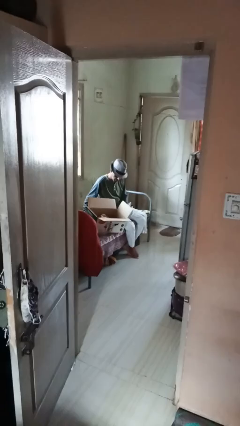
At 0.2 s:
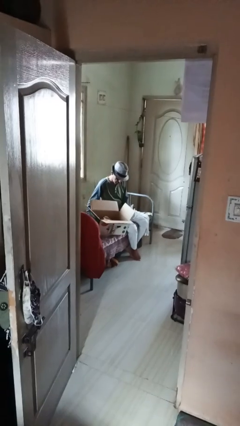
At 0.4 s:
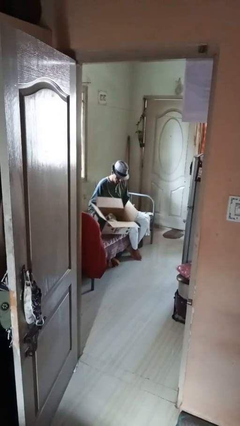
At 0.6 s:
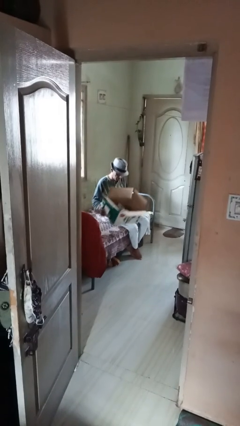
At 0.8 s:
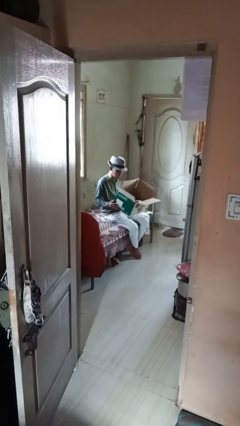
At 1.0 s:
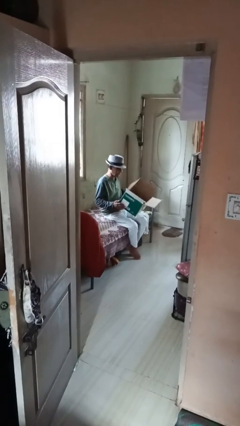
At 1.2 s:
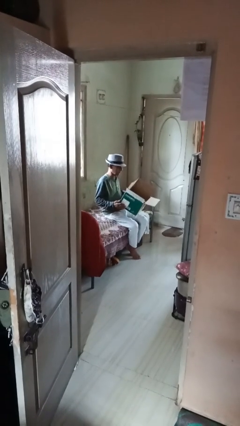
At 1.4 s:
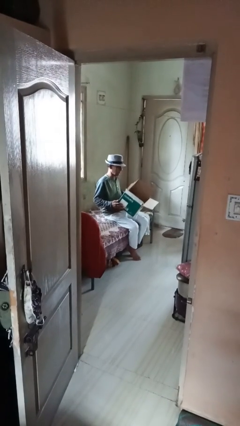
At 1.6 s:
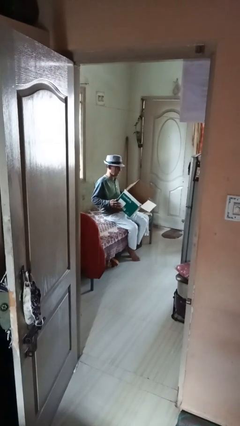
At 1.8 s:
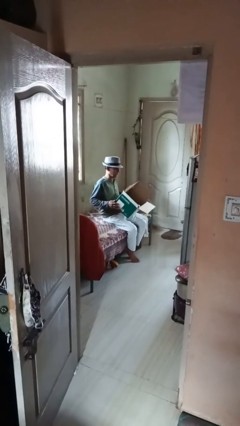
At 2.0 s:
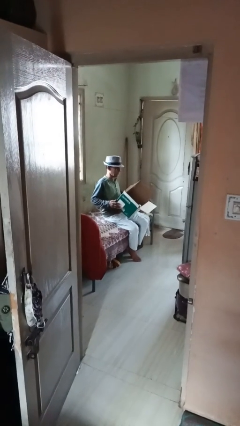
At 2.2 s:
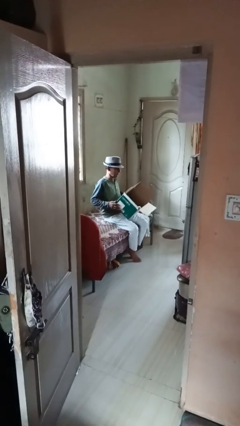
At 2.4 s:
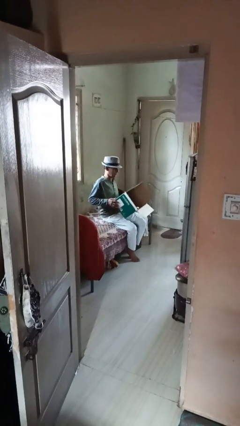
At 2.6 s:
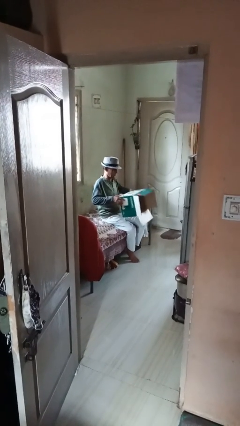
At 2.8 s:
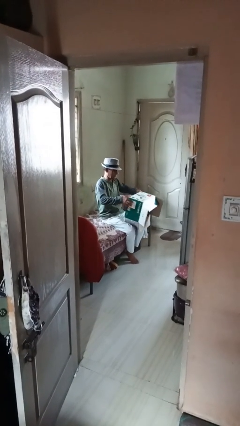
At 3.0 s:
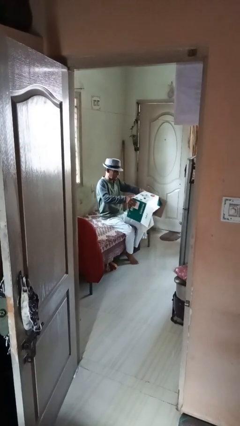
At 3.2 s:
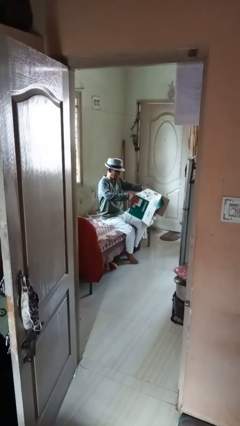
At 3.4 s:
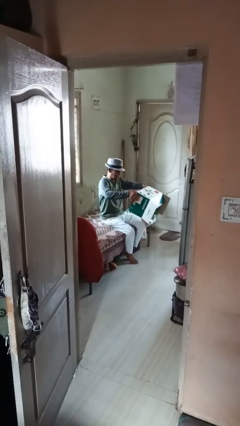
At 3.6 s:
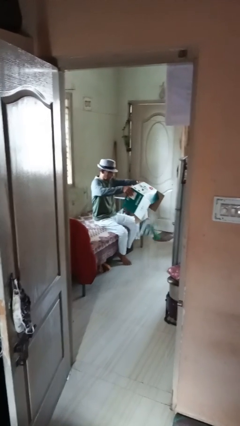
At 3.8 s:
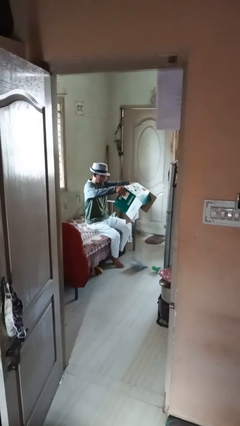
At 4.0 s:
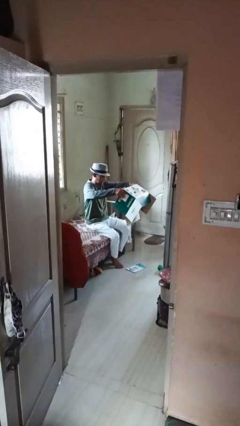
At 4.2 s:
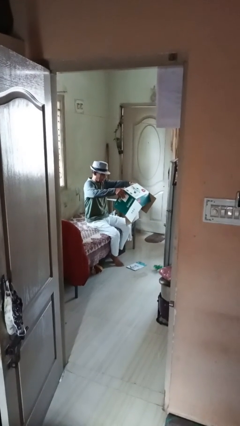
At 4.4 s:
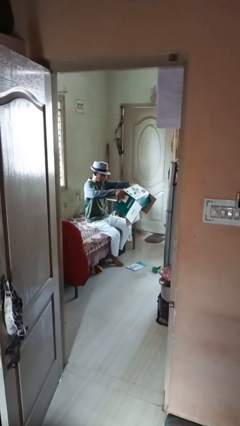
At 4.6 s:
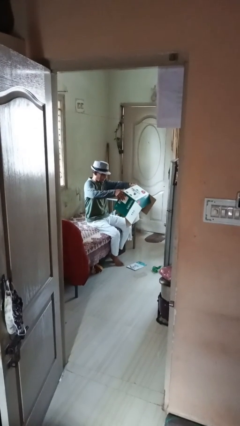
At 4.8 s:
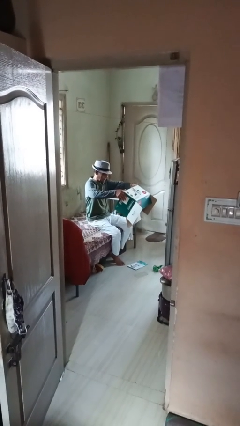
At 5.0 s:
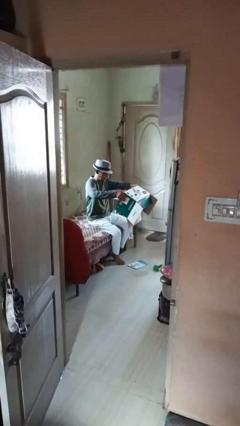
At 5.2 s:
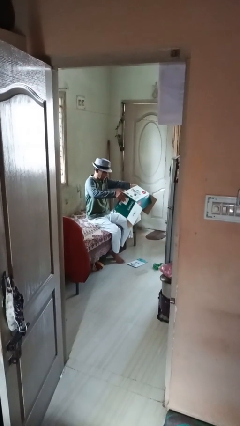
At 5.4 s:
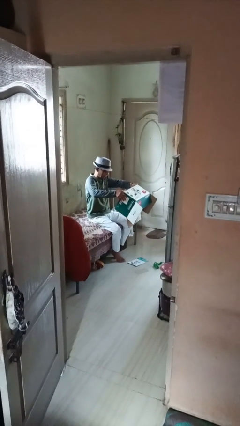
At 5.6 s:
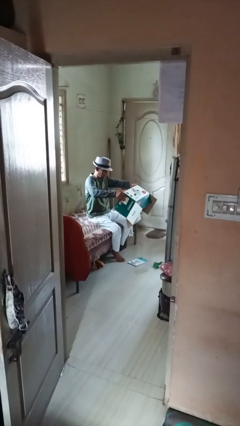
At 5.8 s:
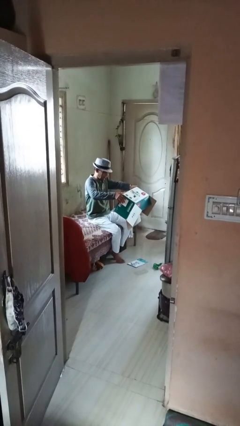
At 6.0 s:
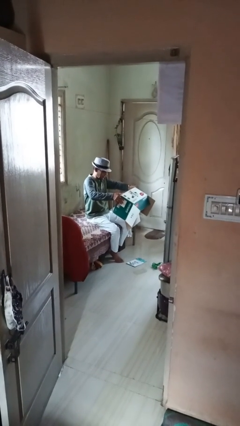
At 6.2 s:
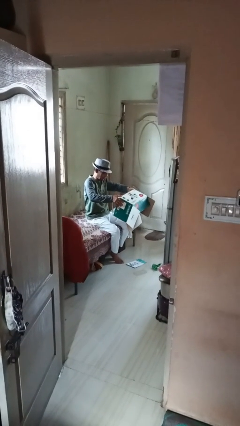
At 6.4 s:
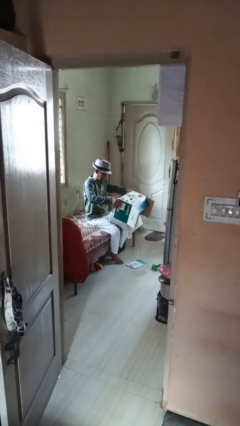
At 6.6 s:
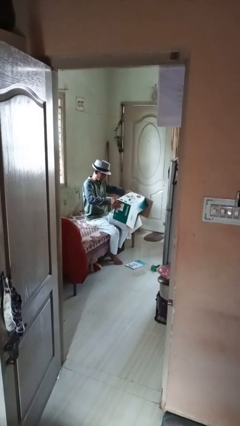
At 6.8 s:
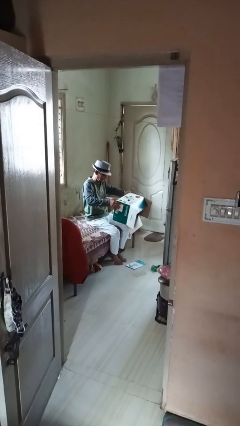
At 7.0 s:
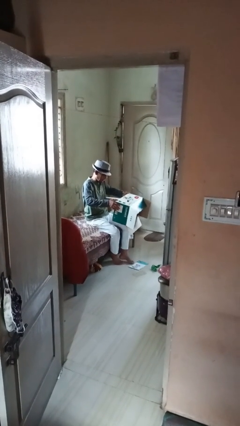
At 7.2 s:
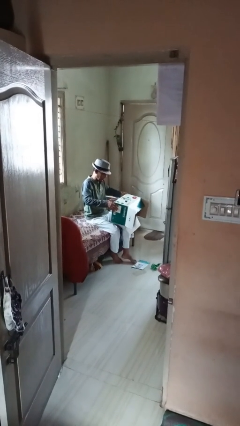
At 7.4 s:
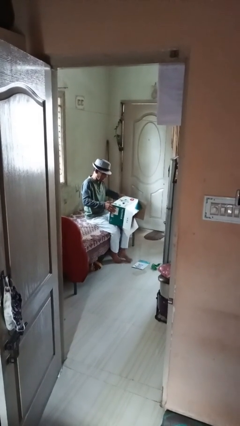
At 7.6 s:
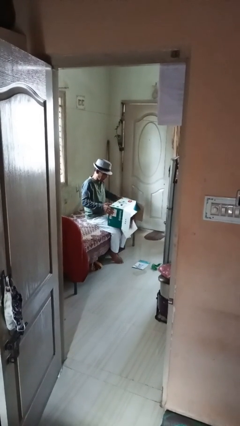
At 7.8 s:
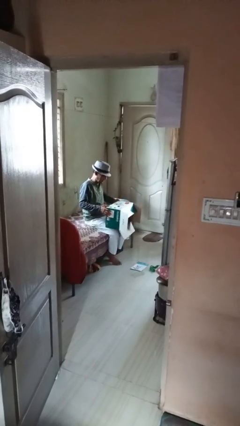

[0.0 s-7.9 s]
person unloads box onto floor

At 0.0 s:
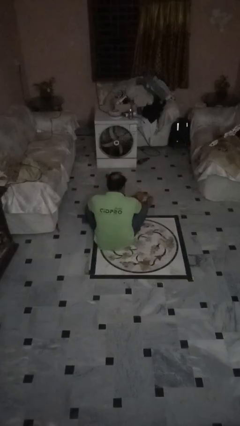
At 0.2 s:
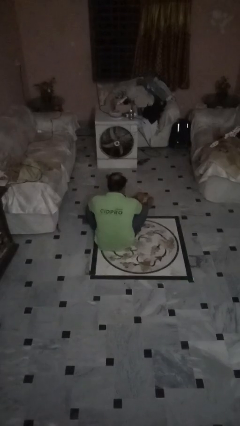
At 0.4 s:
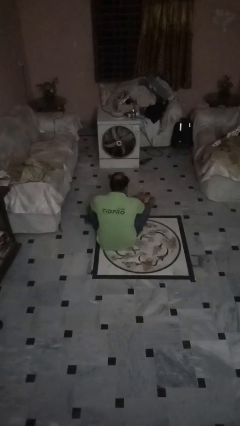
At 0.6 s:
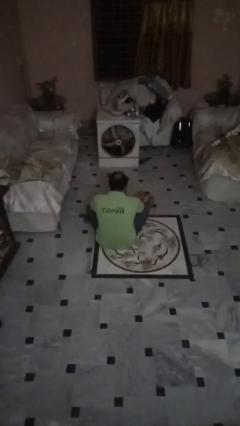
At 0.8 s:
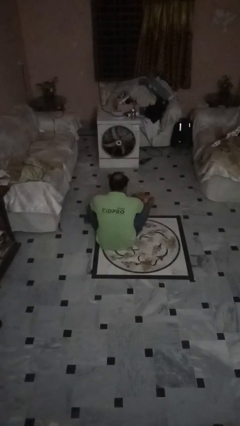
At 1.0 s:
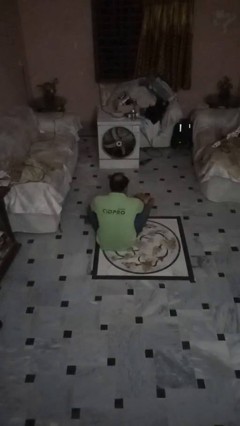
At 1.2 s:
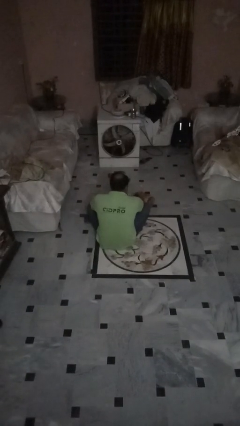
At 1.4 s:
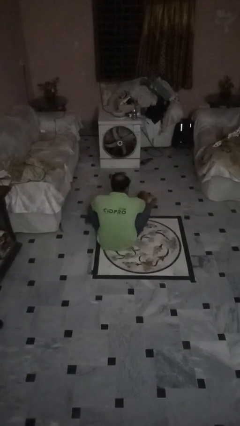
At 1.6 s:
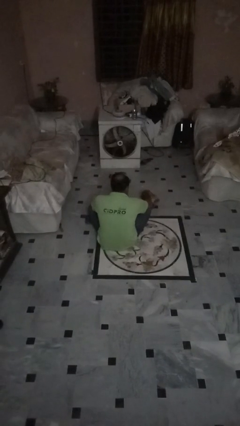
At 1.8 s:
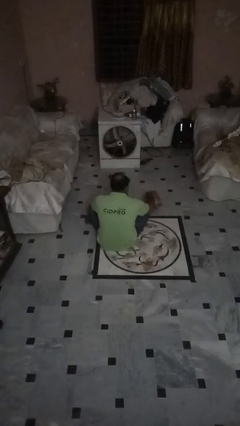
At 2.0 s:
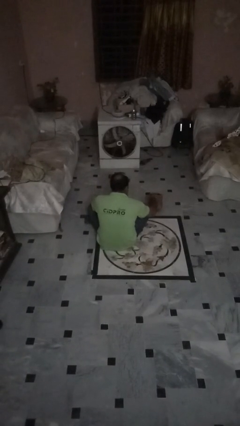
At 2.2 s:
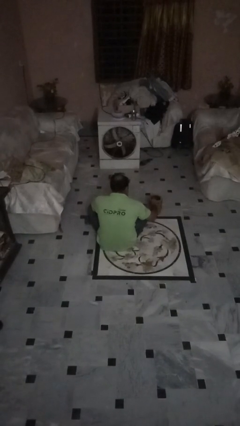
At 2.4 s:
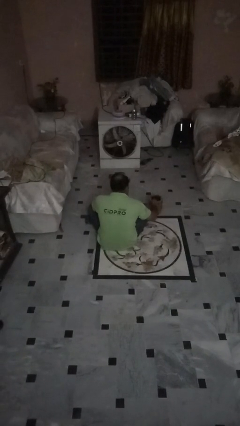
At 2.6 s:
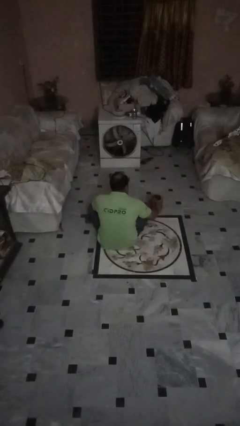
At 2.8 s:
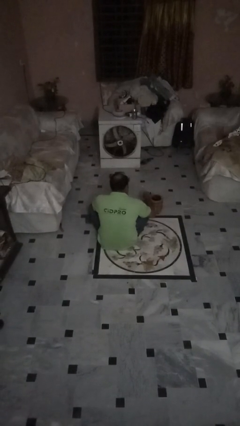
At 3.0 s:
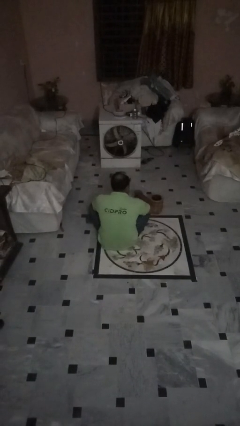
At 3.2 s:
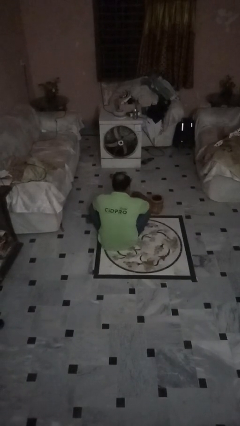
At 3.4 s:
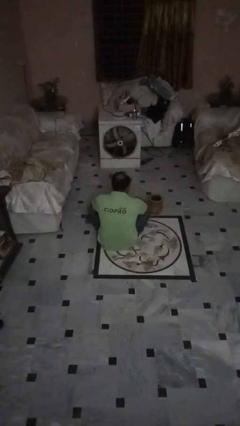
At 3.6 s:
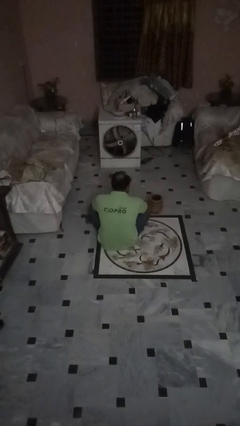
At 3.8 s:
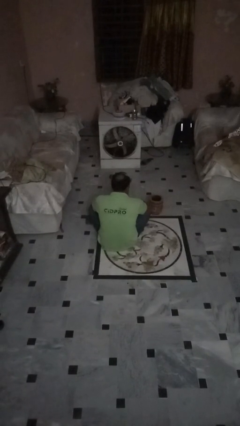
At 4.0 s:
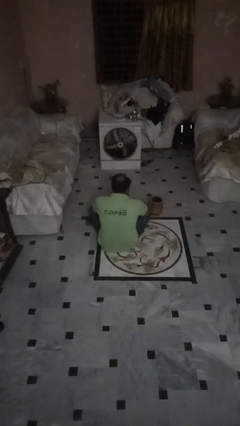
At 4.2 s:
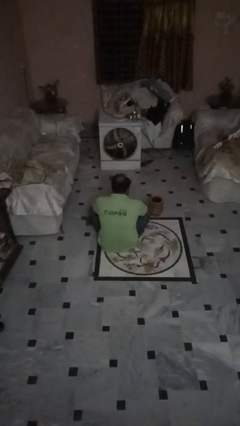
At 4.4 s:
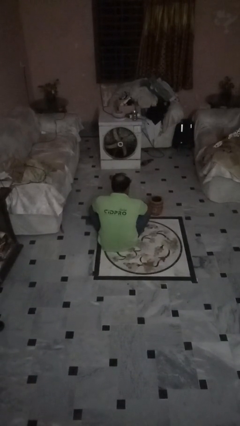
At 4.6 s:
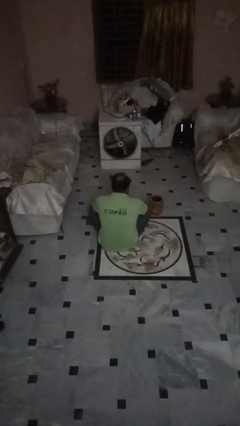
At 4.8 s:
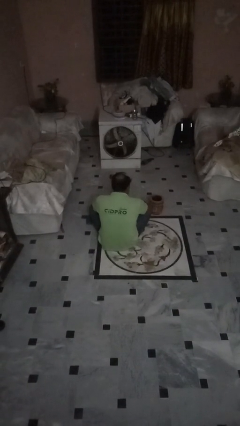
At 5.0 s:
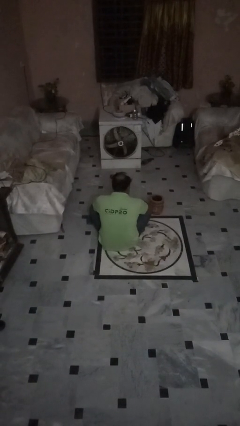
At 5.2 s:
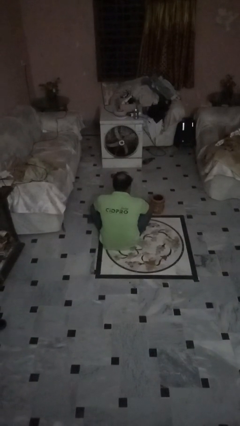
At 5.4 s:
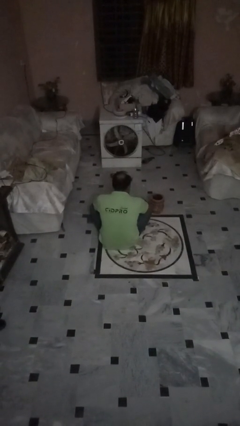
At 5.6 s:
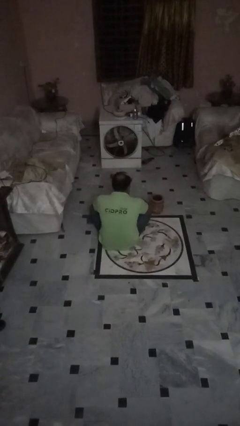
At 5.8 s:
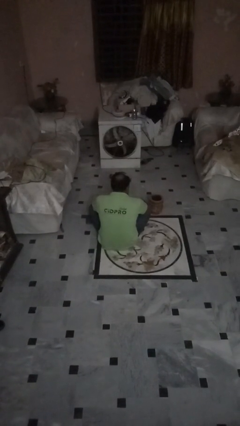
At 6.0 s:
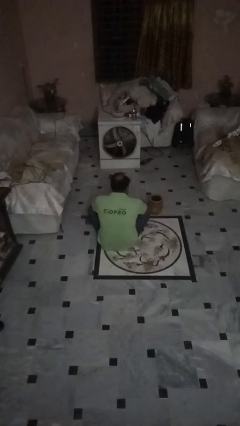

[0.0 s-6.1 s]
person sets upright furniture

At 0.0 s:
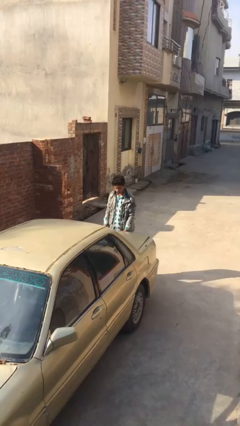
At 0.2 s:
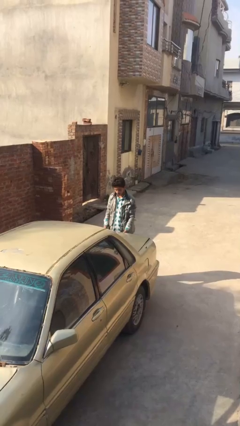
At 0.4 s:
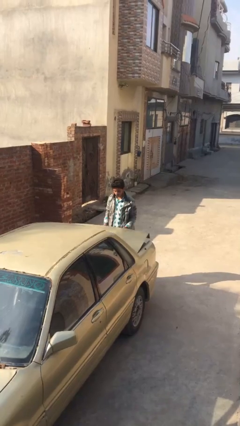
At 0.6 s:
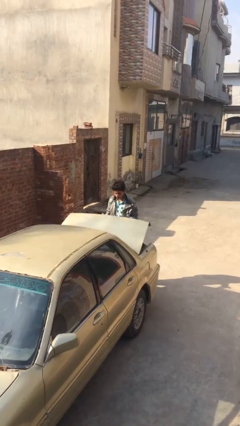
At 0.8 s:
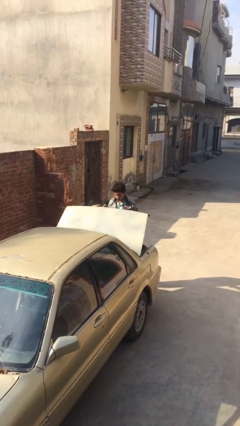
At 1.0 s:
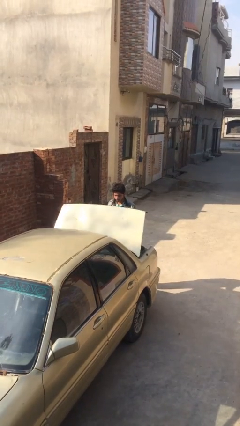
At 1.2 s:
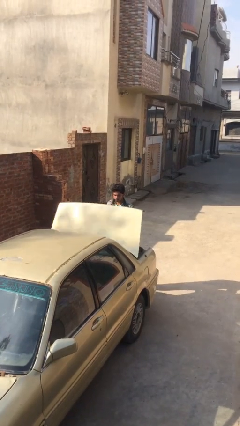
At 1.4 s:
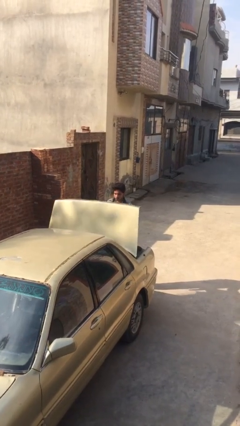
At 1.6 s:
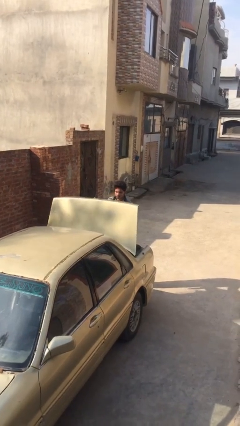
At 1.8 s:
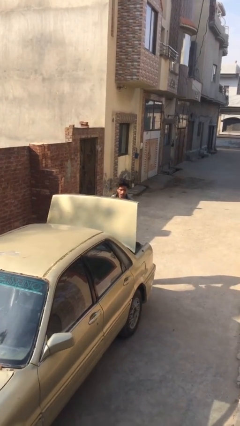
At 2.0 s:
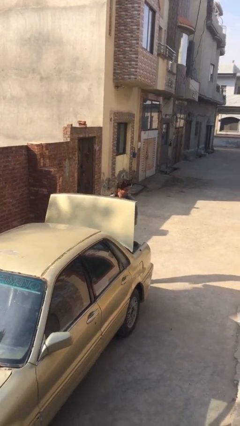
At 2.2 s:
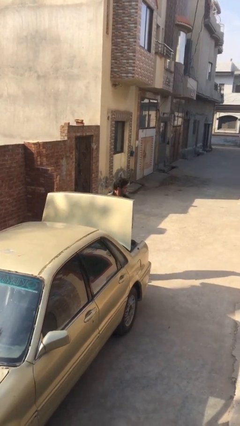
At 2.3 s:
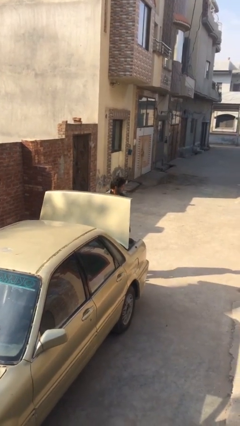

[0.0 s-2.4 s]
person opens car trunk

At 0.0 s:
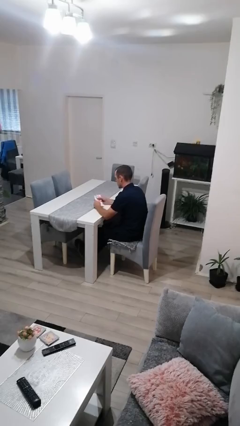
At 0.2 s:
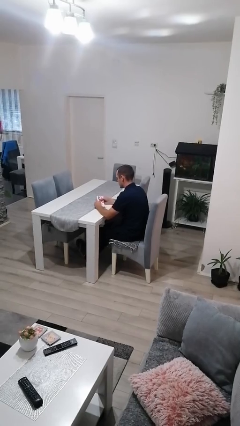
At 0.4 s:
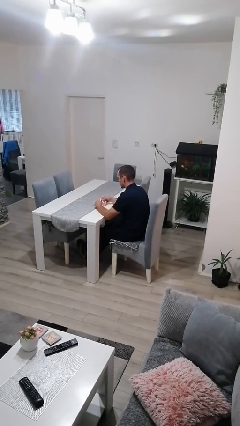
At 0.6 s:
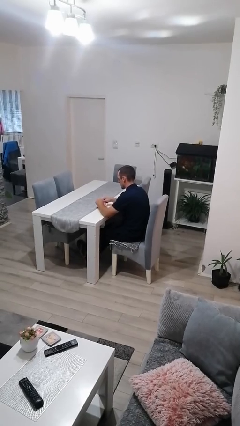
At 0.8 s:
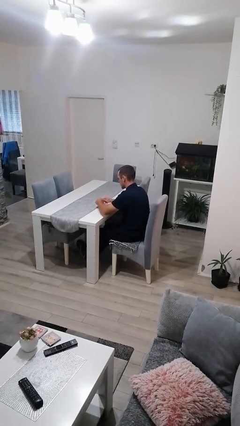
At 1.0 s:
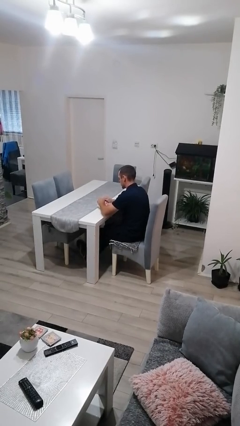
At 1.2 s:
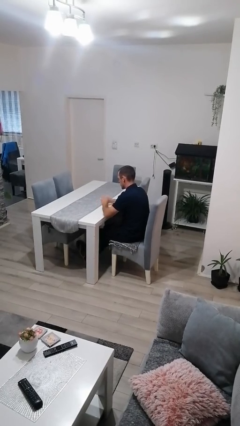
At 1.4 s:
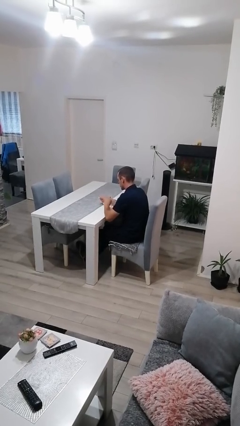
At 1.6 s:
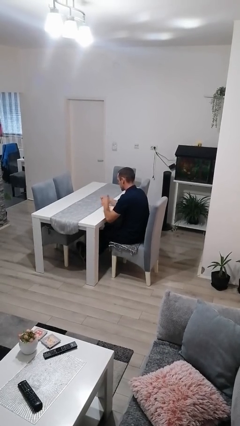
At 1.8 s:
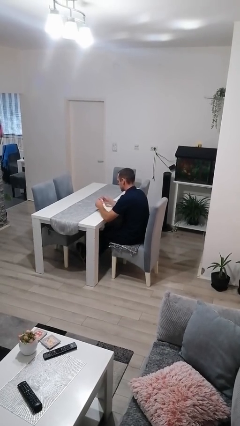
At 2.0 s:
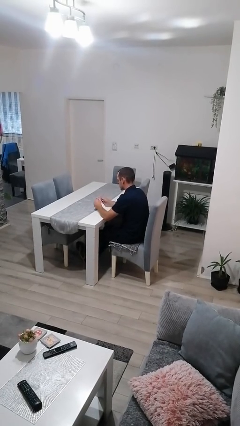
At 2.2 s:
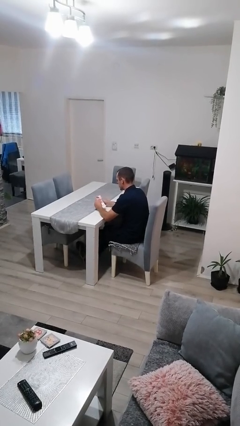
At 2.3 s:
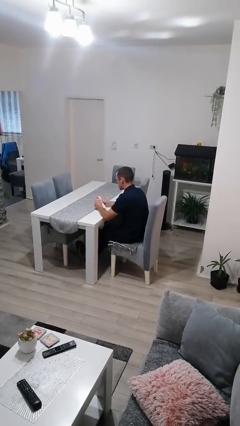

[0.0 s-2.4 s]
person tears paper
